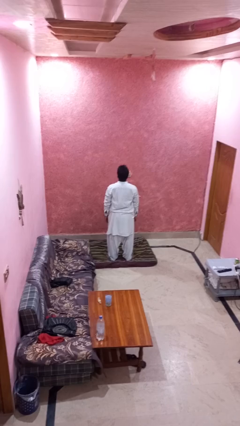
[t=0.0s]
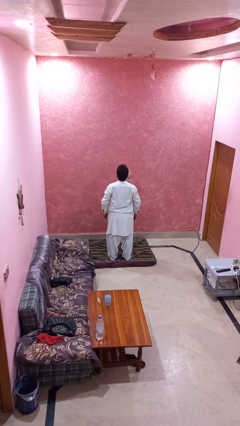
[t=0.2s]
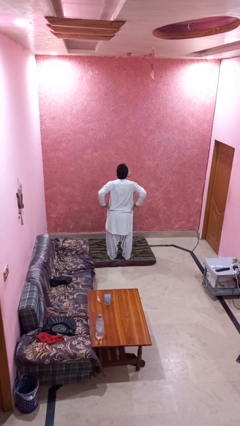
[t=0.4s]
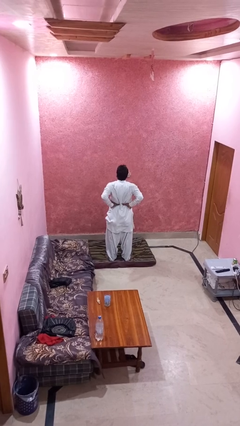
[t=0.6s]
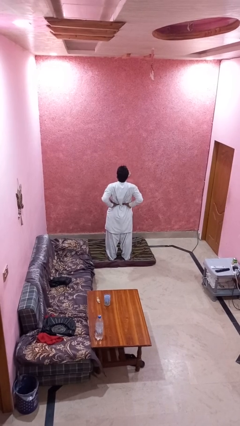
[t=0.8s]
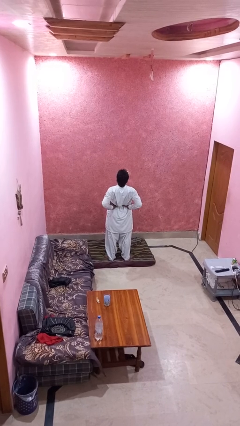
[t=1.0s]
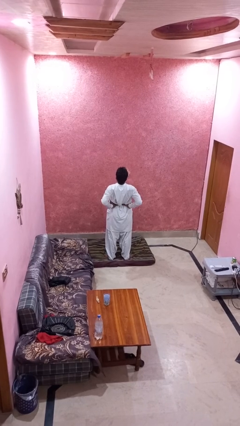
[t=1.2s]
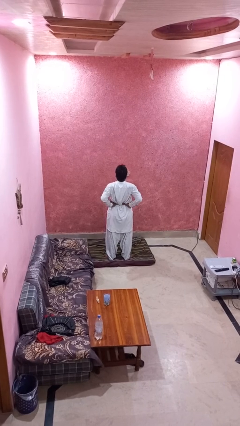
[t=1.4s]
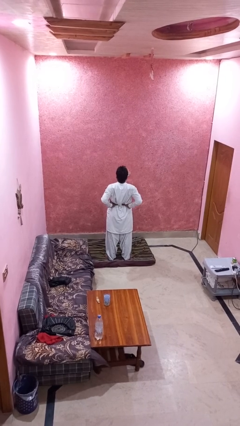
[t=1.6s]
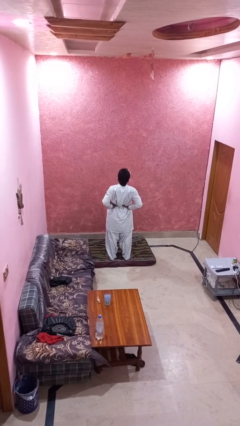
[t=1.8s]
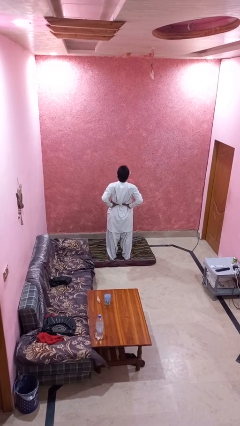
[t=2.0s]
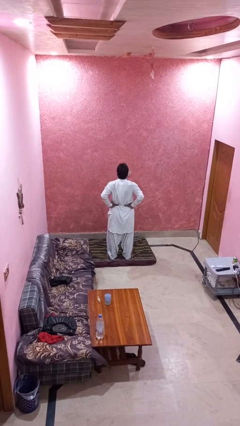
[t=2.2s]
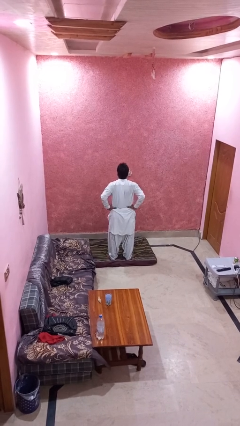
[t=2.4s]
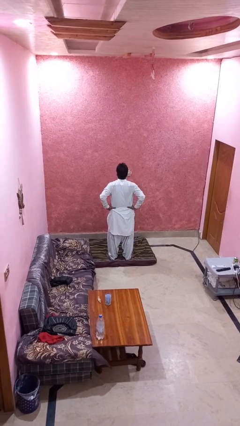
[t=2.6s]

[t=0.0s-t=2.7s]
person stretches back

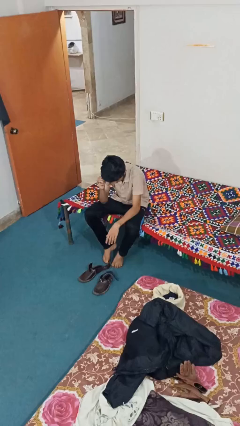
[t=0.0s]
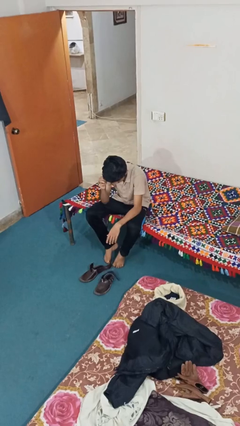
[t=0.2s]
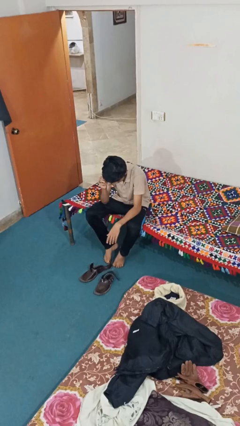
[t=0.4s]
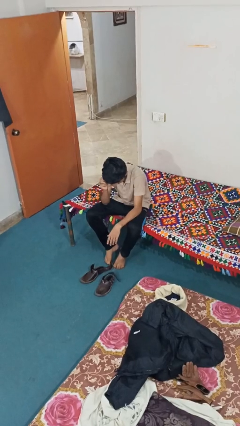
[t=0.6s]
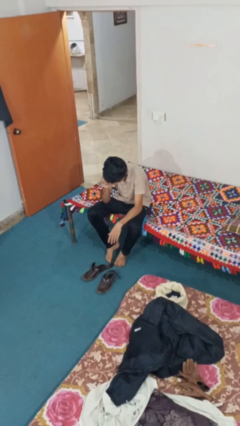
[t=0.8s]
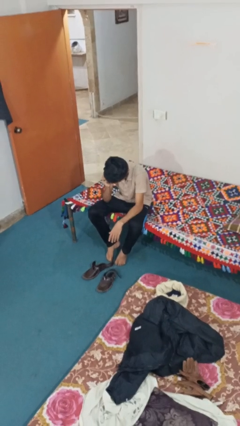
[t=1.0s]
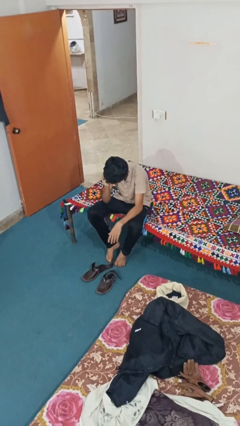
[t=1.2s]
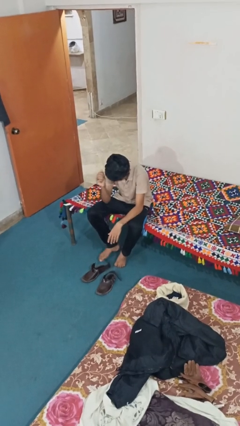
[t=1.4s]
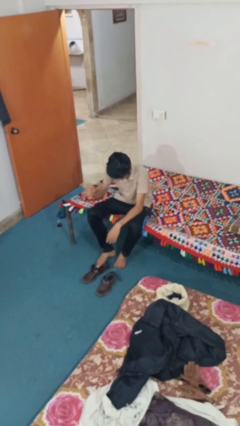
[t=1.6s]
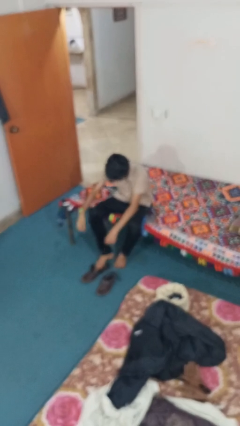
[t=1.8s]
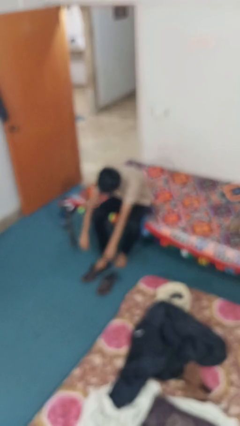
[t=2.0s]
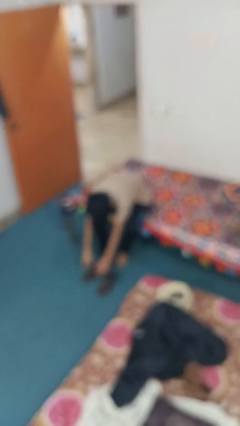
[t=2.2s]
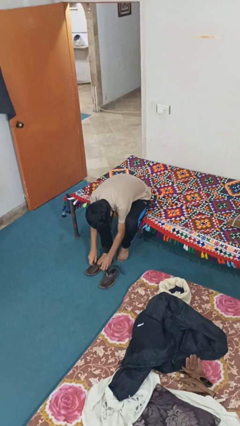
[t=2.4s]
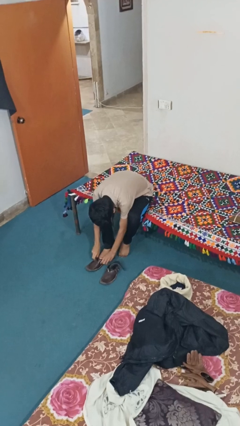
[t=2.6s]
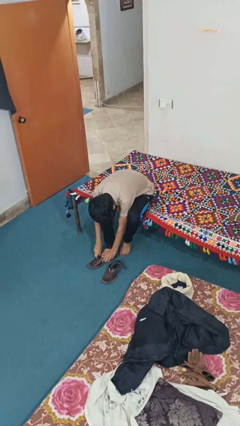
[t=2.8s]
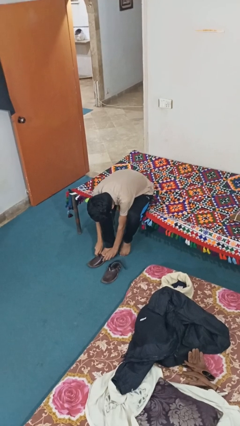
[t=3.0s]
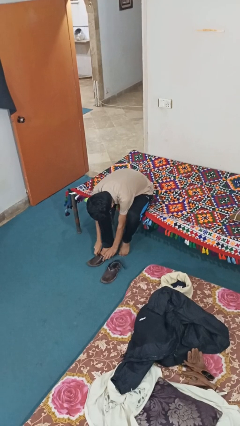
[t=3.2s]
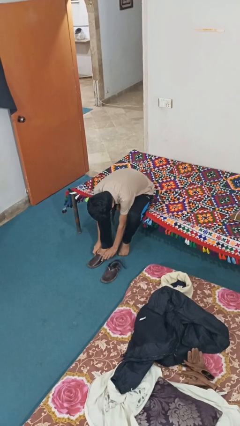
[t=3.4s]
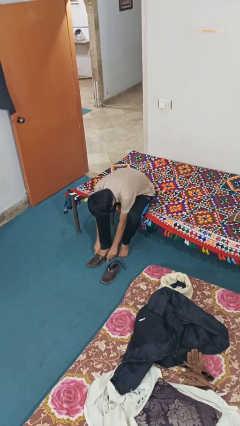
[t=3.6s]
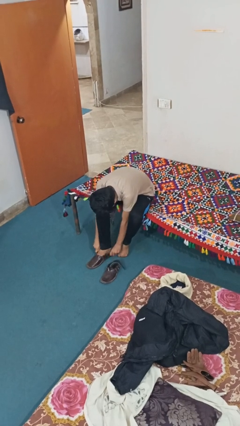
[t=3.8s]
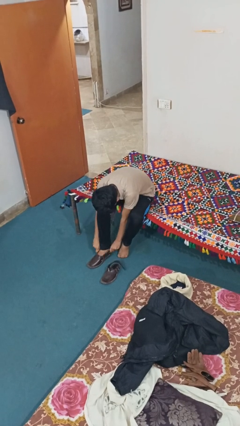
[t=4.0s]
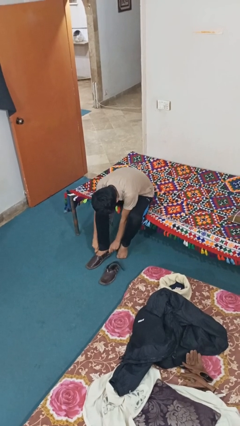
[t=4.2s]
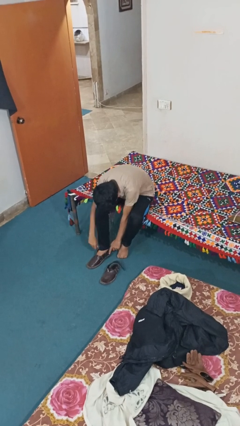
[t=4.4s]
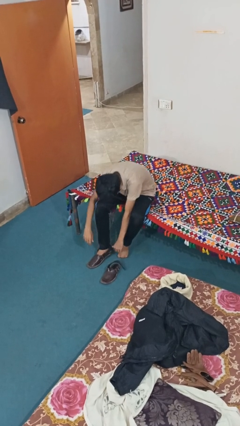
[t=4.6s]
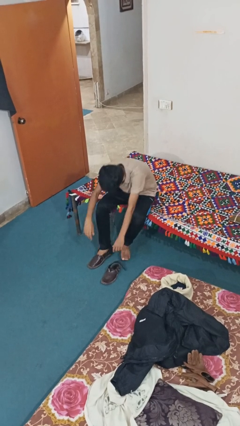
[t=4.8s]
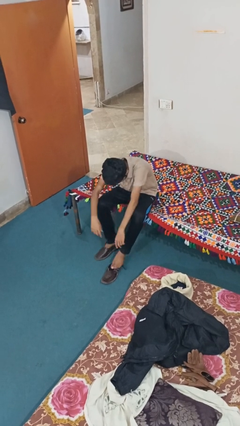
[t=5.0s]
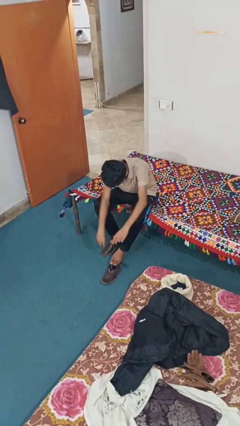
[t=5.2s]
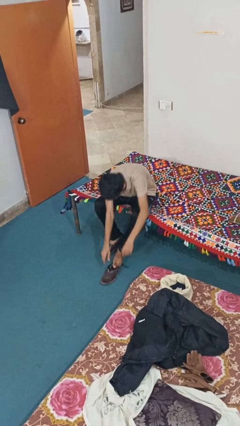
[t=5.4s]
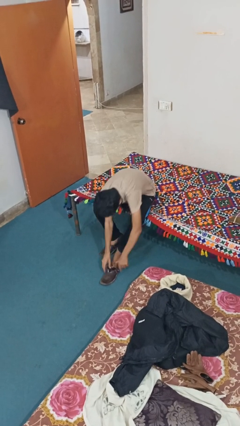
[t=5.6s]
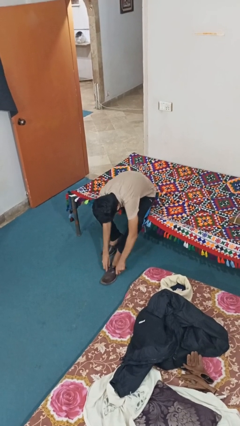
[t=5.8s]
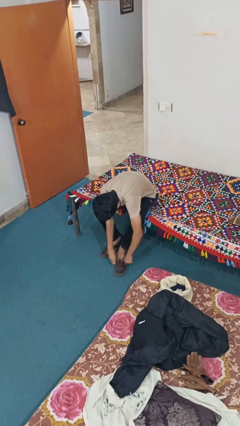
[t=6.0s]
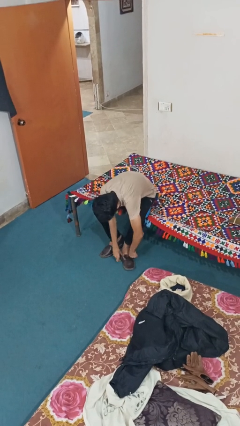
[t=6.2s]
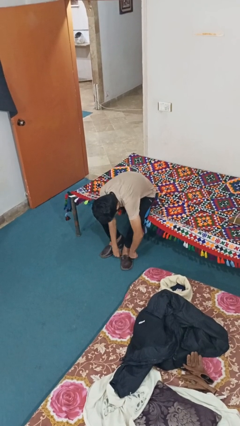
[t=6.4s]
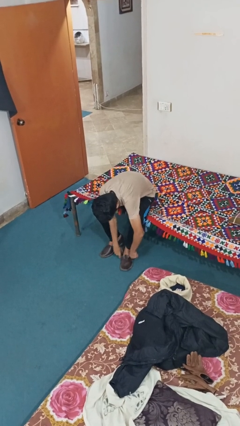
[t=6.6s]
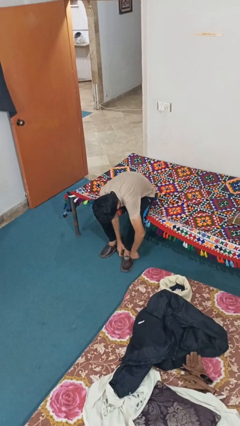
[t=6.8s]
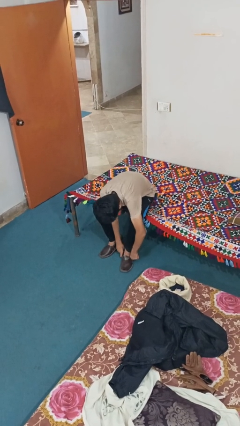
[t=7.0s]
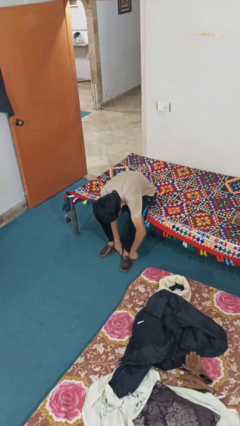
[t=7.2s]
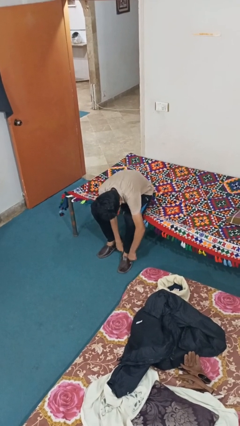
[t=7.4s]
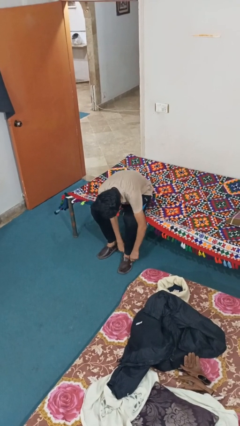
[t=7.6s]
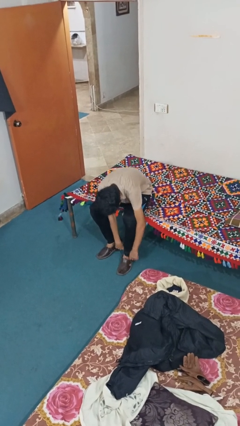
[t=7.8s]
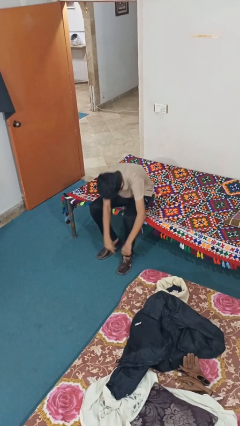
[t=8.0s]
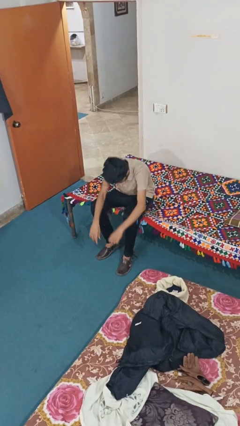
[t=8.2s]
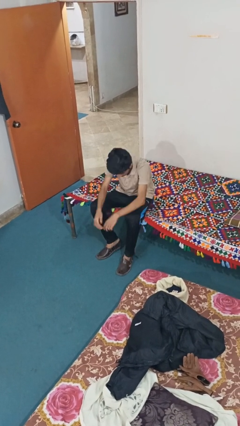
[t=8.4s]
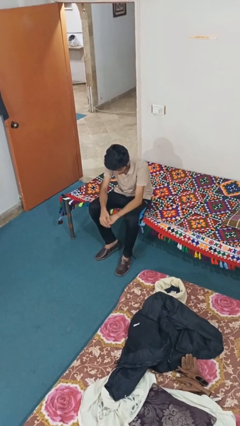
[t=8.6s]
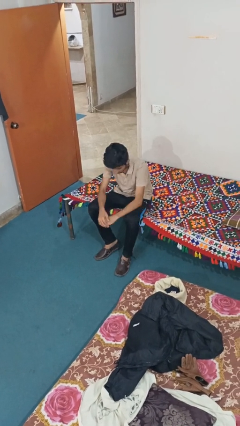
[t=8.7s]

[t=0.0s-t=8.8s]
person puts on shoes

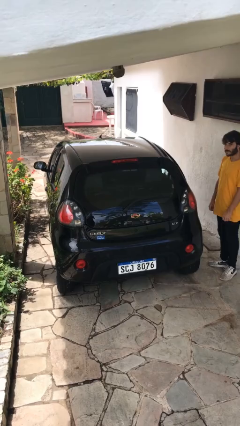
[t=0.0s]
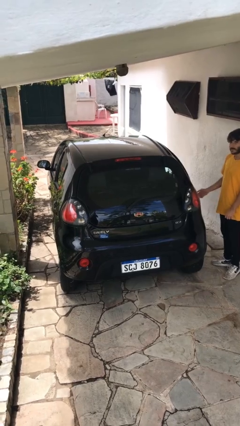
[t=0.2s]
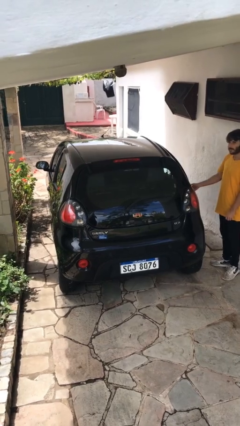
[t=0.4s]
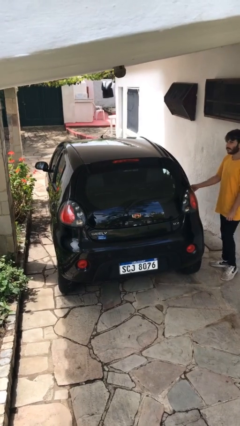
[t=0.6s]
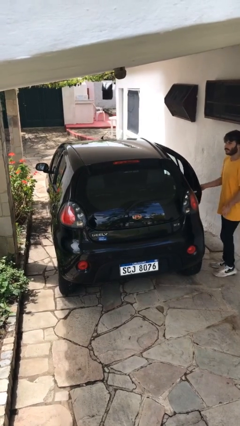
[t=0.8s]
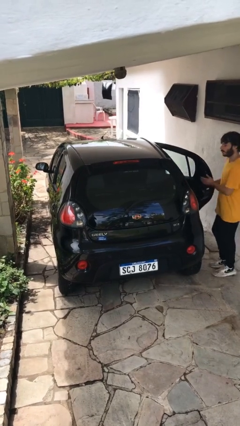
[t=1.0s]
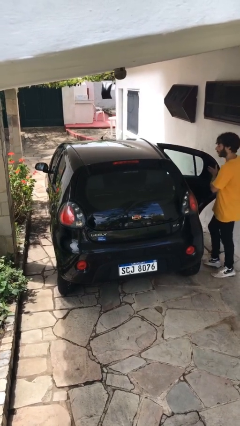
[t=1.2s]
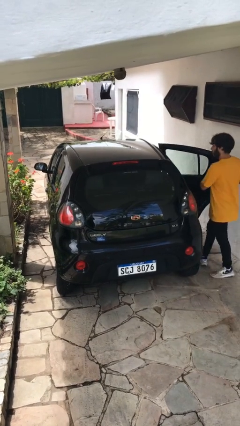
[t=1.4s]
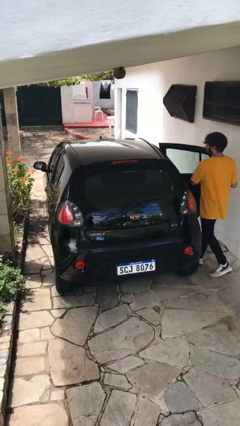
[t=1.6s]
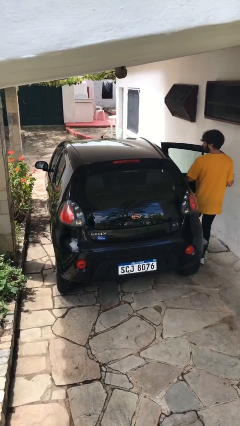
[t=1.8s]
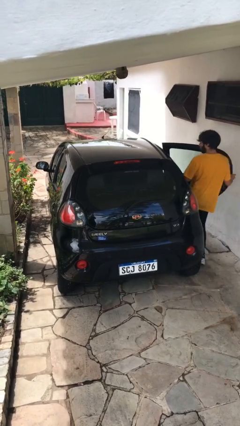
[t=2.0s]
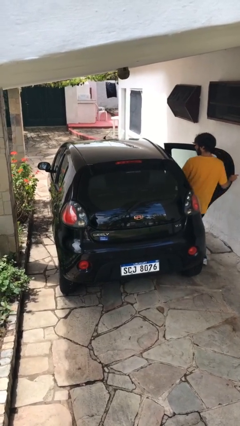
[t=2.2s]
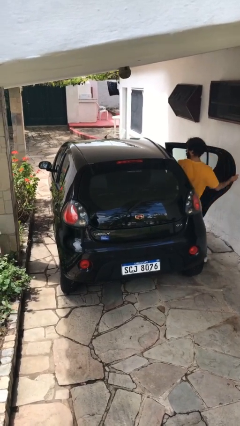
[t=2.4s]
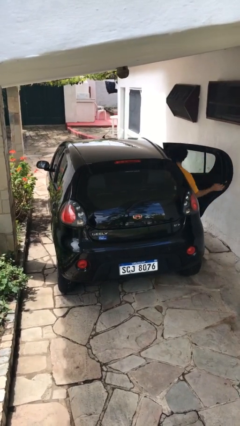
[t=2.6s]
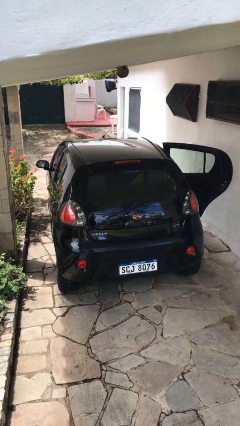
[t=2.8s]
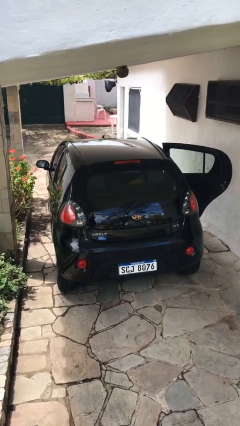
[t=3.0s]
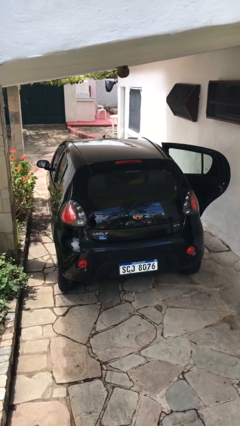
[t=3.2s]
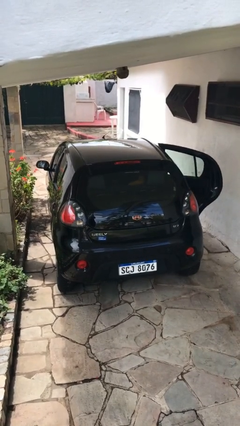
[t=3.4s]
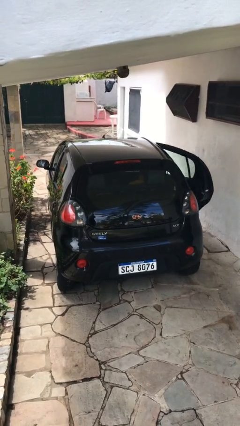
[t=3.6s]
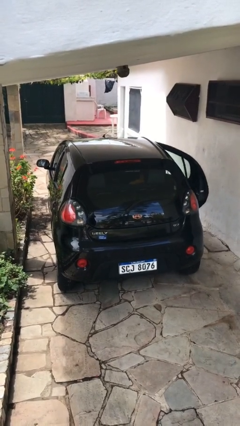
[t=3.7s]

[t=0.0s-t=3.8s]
car picks up person

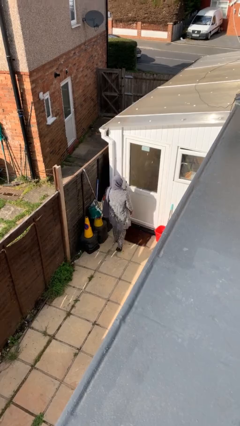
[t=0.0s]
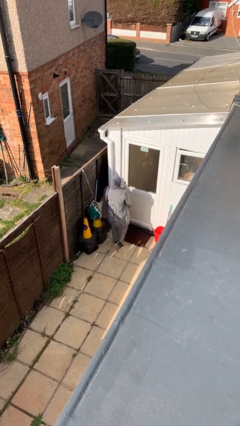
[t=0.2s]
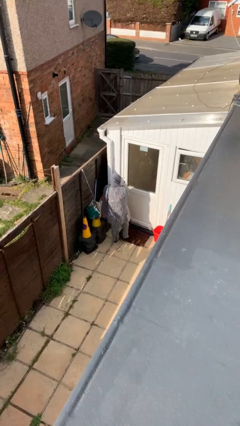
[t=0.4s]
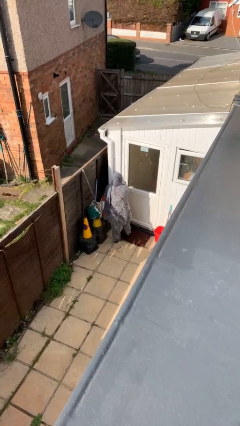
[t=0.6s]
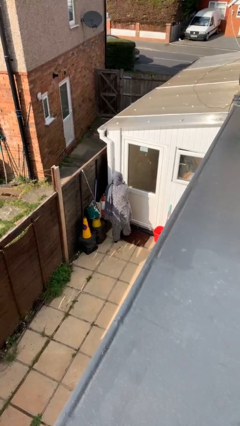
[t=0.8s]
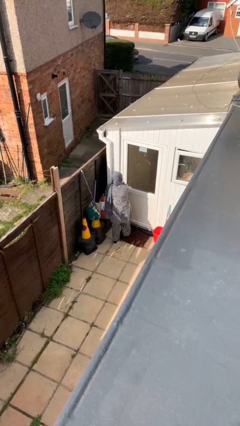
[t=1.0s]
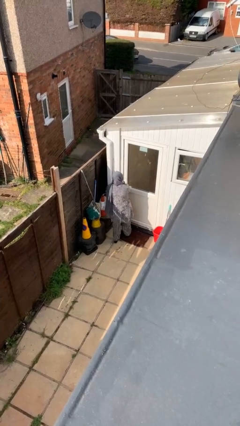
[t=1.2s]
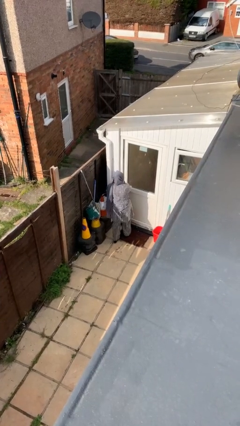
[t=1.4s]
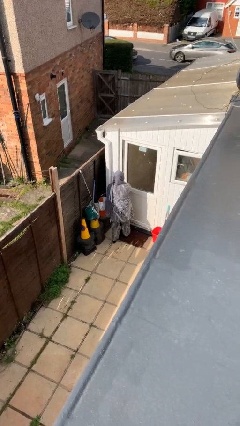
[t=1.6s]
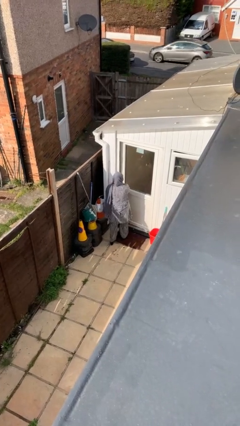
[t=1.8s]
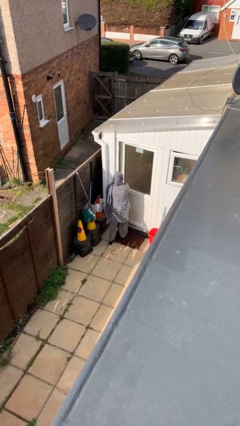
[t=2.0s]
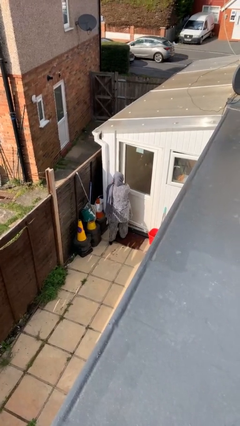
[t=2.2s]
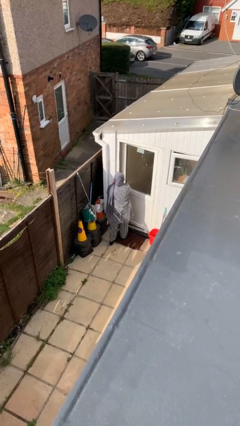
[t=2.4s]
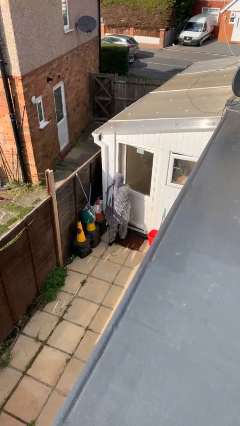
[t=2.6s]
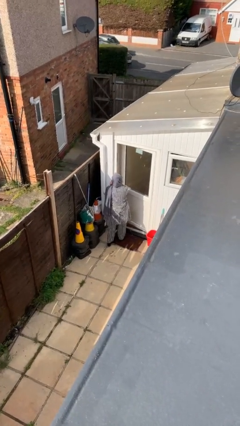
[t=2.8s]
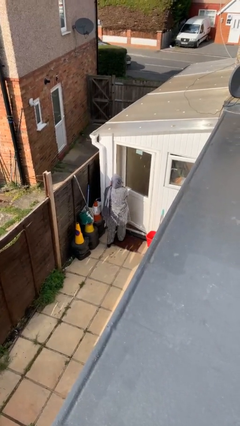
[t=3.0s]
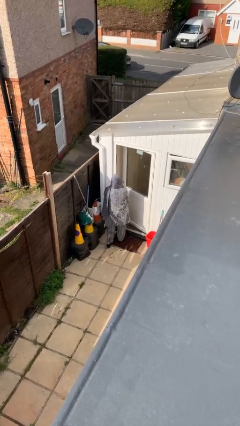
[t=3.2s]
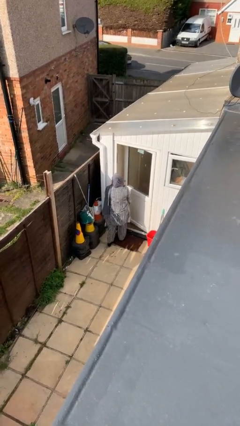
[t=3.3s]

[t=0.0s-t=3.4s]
person opens facility door
